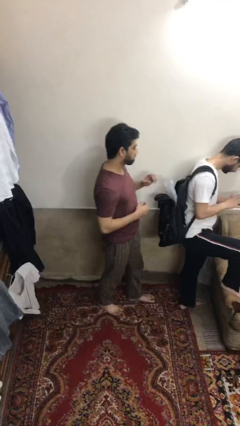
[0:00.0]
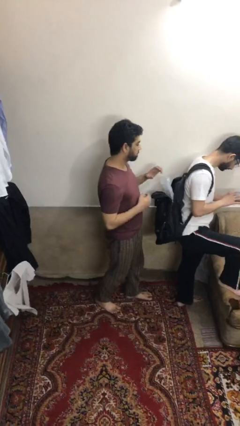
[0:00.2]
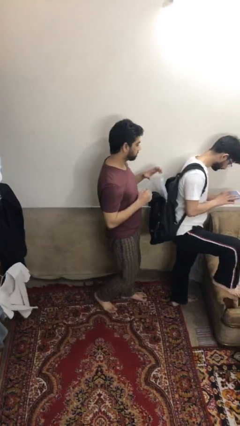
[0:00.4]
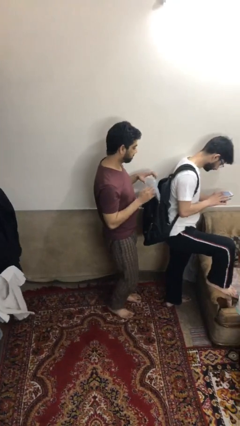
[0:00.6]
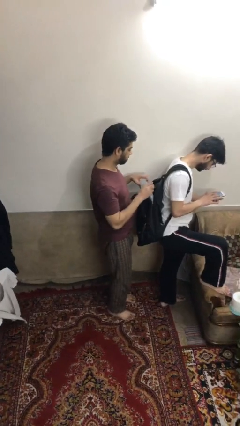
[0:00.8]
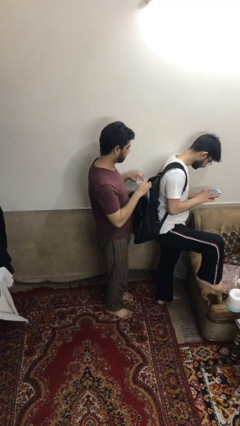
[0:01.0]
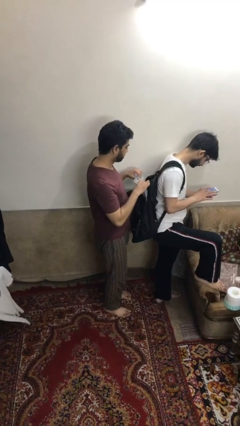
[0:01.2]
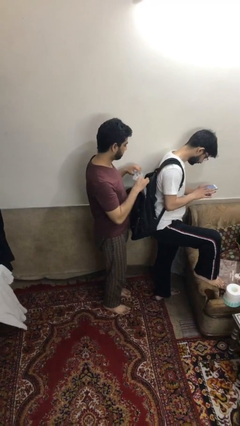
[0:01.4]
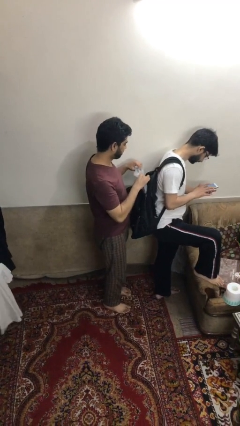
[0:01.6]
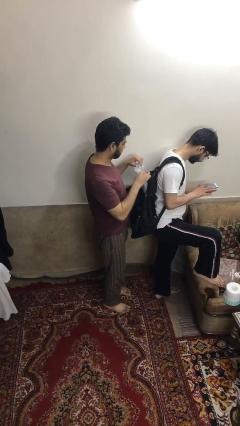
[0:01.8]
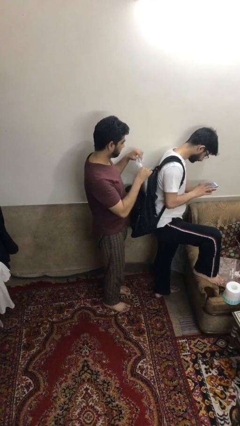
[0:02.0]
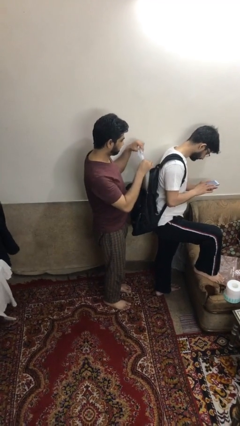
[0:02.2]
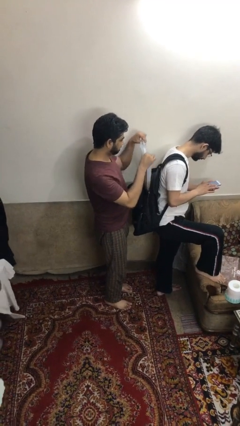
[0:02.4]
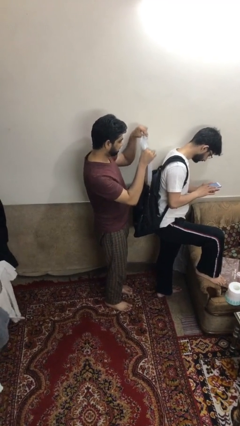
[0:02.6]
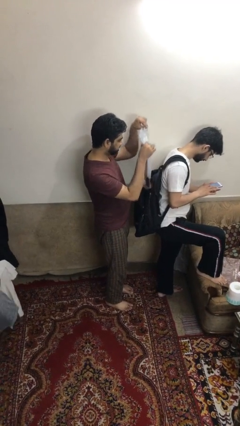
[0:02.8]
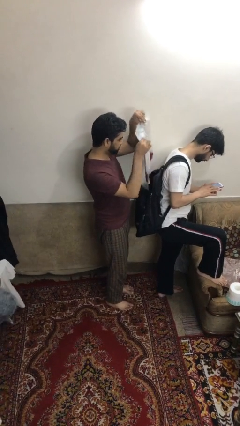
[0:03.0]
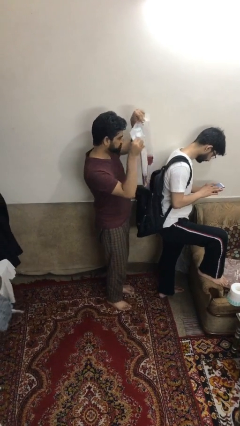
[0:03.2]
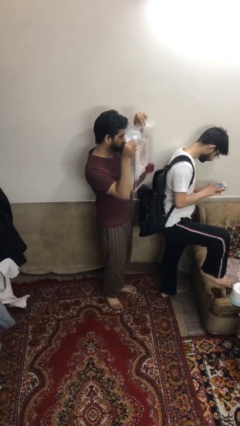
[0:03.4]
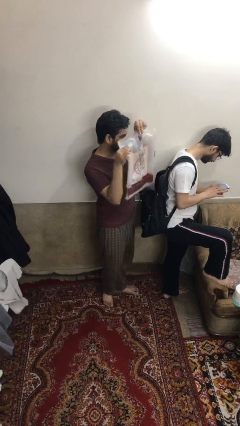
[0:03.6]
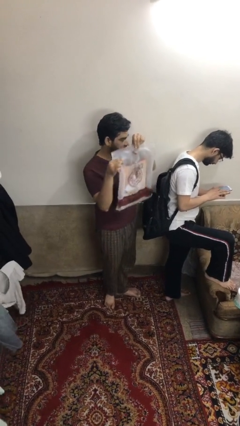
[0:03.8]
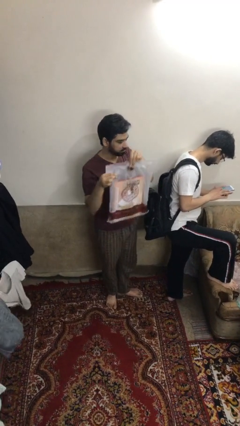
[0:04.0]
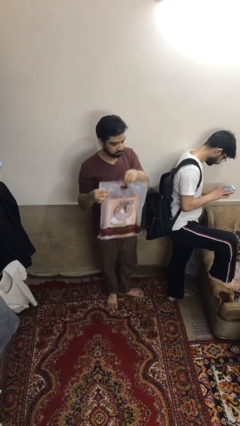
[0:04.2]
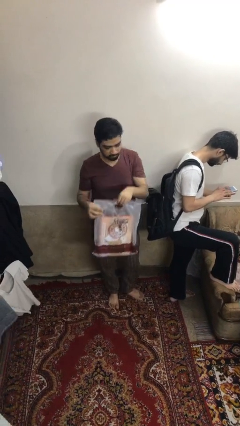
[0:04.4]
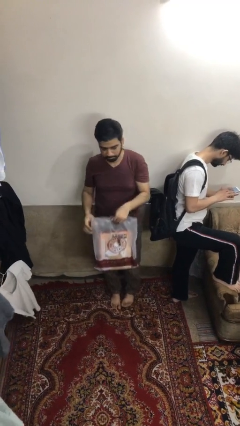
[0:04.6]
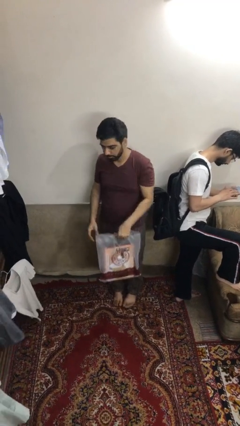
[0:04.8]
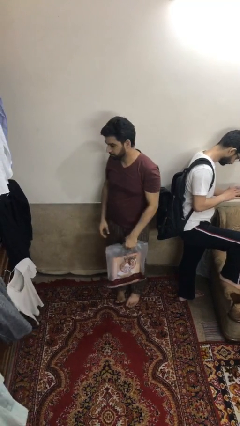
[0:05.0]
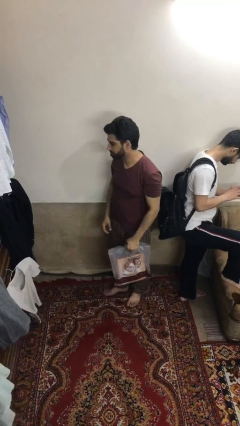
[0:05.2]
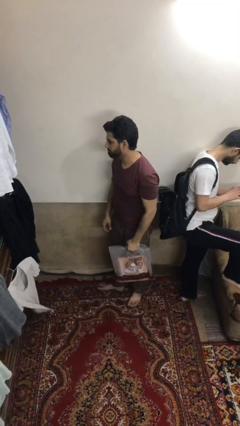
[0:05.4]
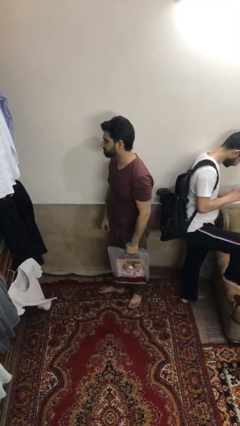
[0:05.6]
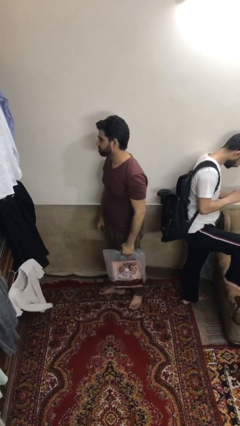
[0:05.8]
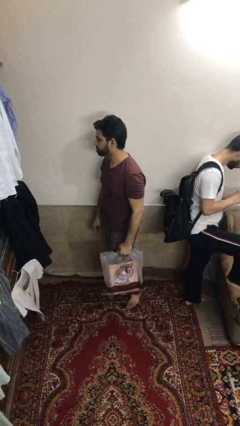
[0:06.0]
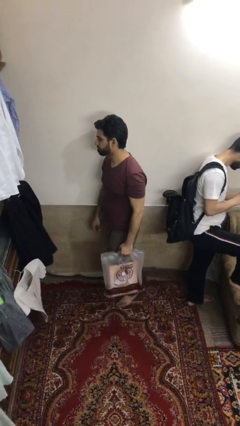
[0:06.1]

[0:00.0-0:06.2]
person steals object from person

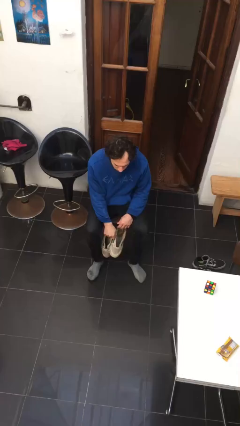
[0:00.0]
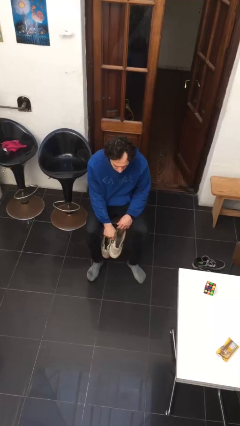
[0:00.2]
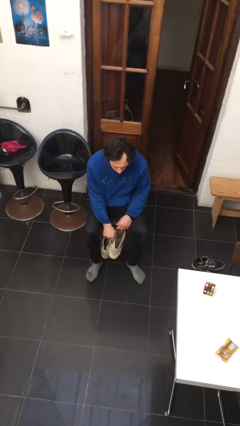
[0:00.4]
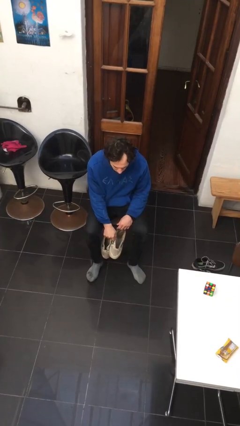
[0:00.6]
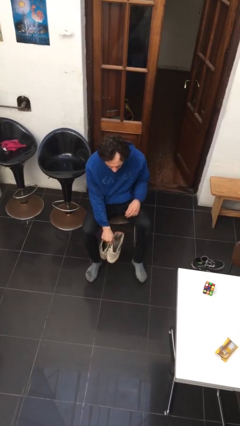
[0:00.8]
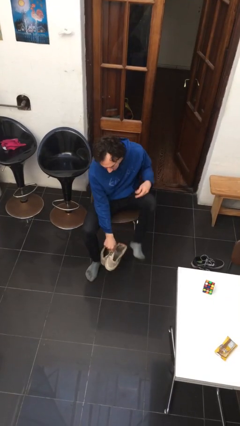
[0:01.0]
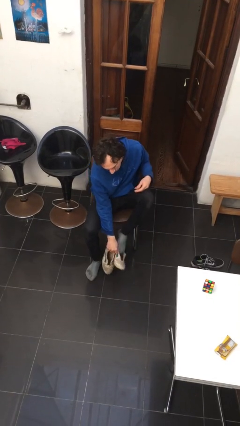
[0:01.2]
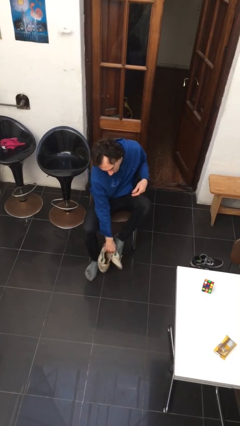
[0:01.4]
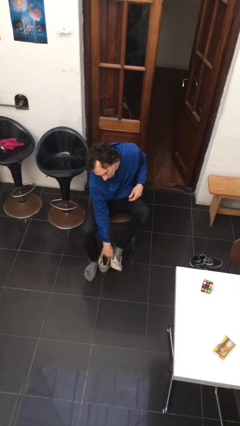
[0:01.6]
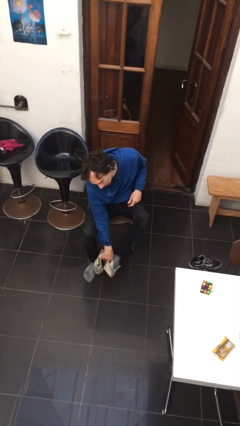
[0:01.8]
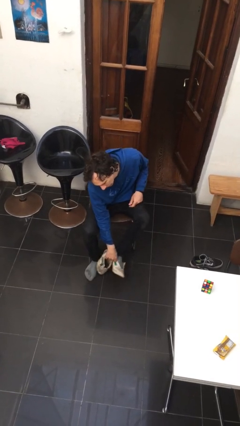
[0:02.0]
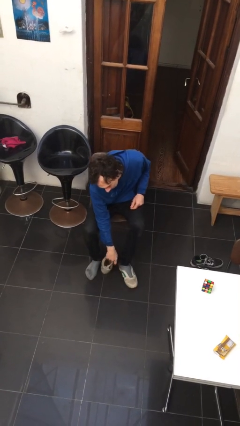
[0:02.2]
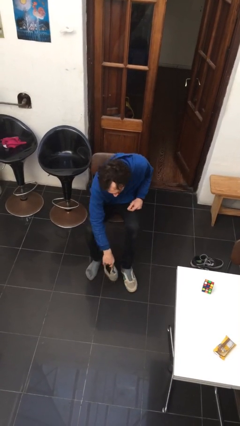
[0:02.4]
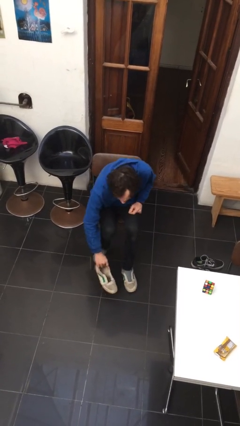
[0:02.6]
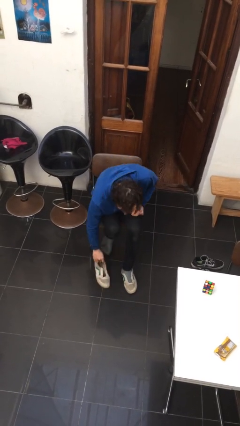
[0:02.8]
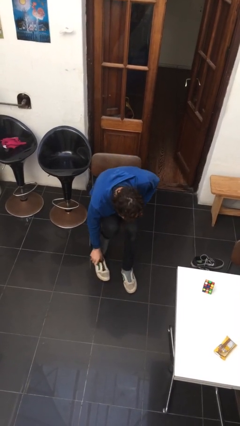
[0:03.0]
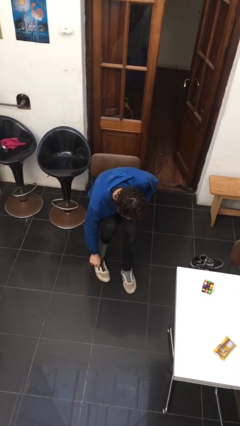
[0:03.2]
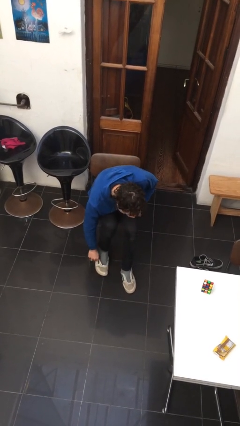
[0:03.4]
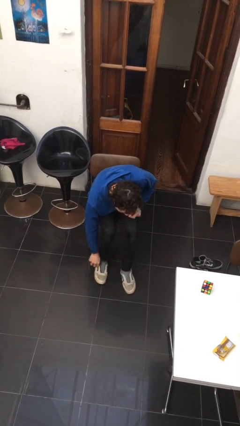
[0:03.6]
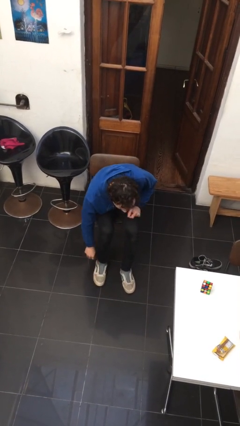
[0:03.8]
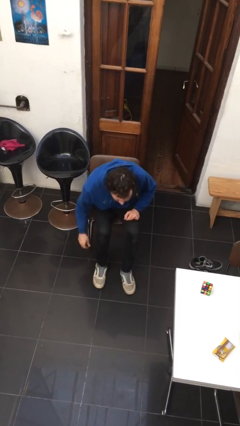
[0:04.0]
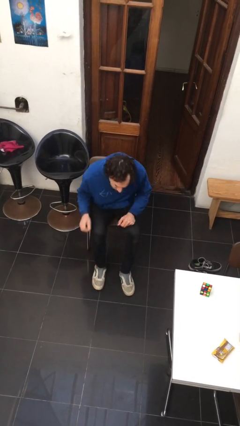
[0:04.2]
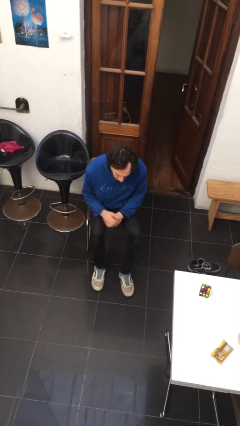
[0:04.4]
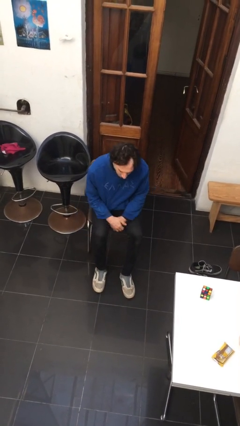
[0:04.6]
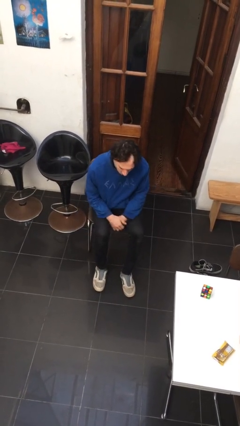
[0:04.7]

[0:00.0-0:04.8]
person puts on shoes

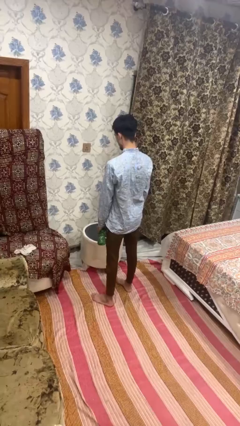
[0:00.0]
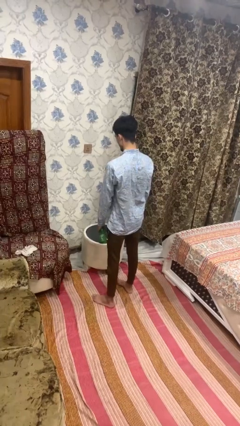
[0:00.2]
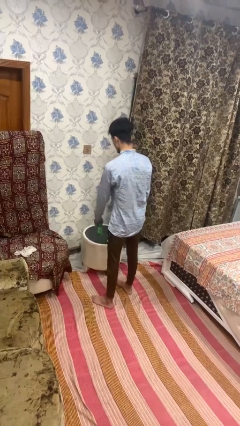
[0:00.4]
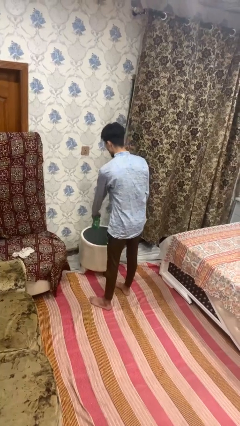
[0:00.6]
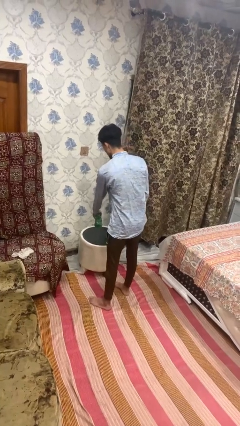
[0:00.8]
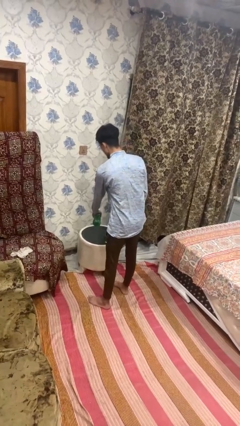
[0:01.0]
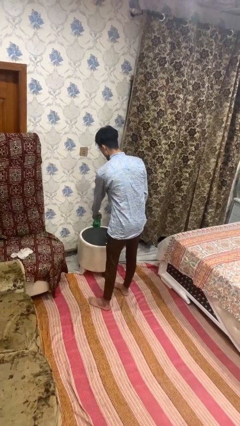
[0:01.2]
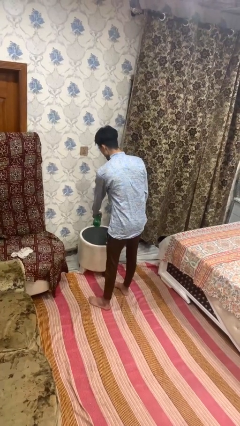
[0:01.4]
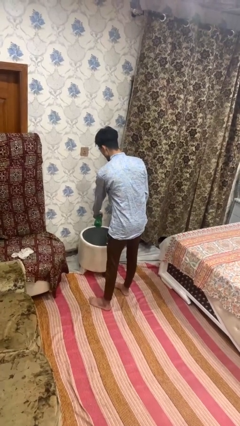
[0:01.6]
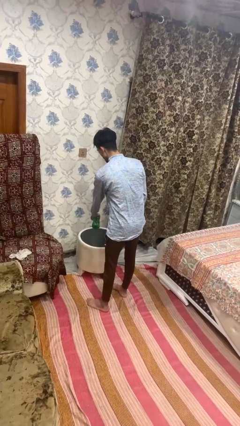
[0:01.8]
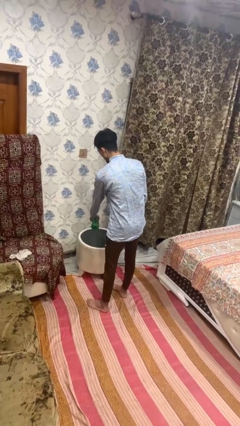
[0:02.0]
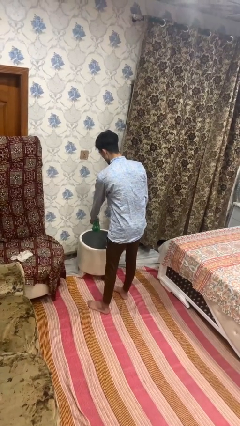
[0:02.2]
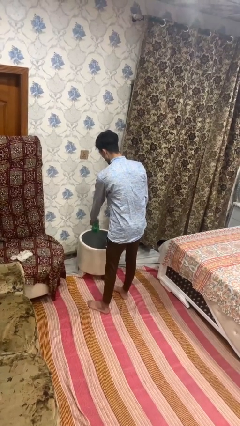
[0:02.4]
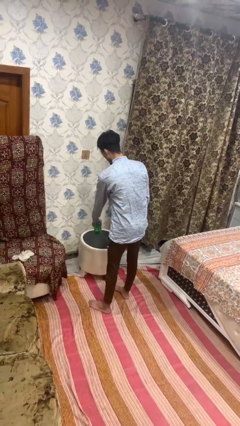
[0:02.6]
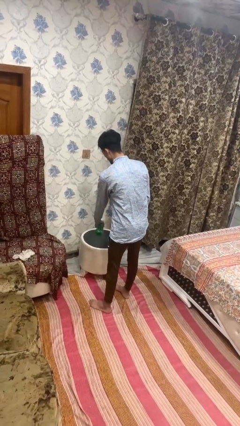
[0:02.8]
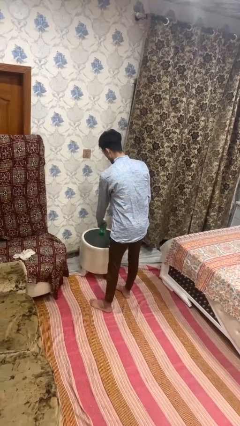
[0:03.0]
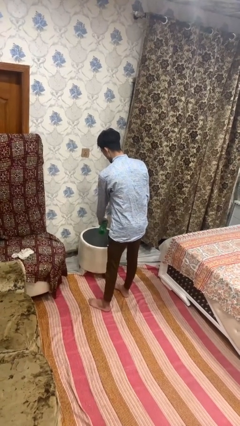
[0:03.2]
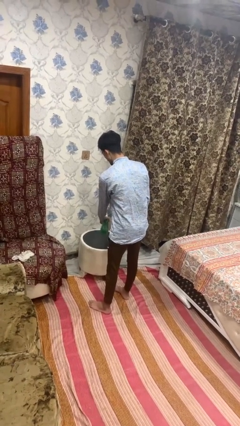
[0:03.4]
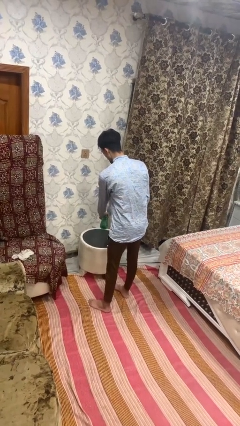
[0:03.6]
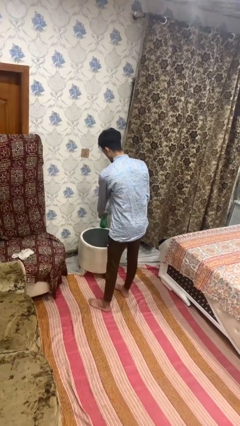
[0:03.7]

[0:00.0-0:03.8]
person sprays from bottle

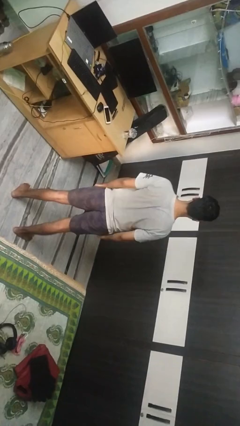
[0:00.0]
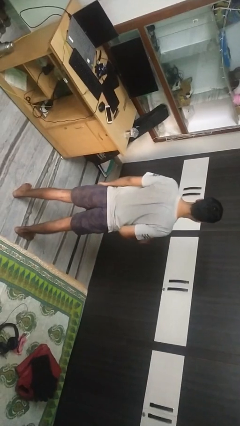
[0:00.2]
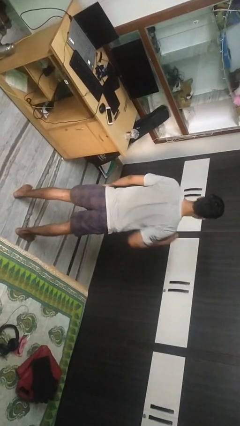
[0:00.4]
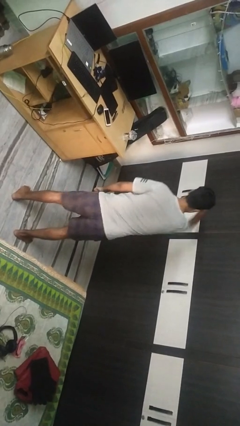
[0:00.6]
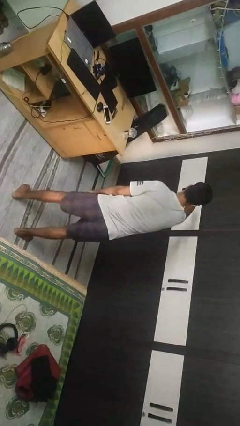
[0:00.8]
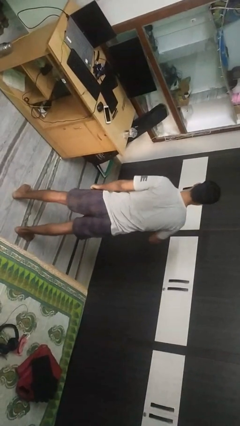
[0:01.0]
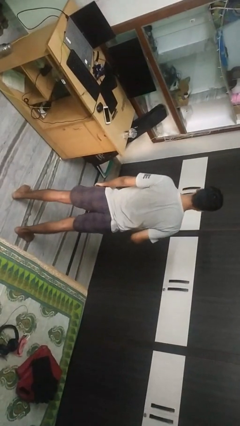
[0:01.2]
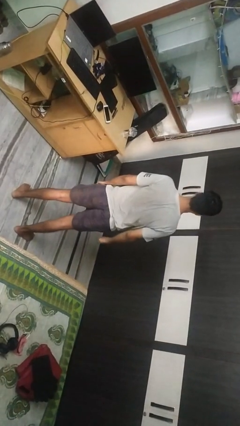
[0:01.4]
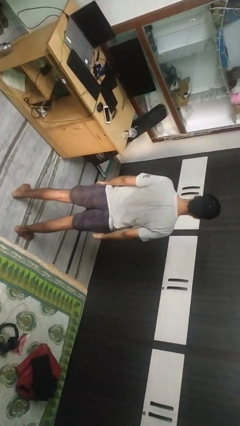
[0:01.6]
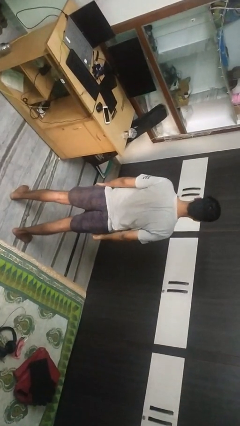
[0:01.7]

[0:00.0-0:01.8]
person punches

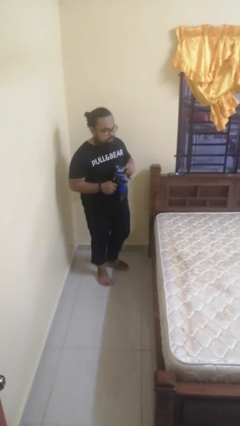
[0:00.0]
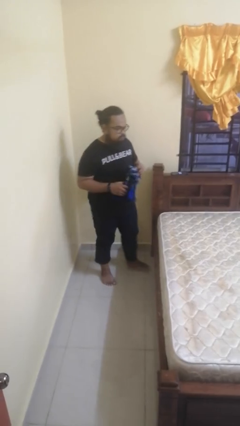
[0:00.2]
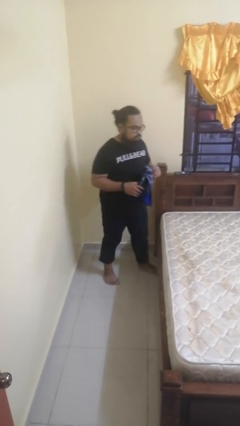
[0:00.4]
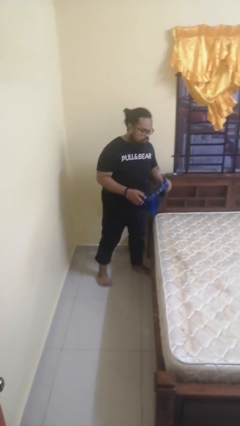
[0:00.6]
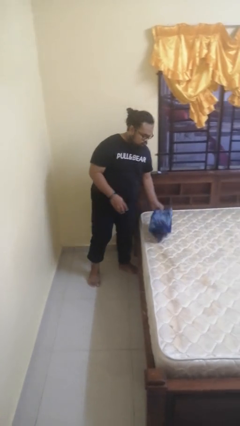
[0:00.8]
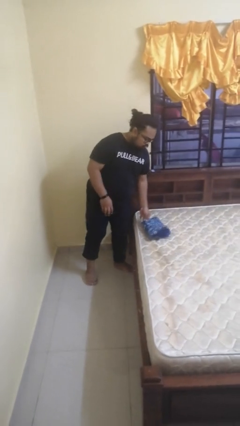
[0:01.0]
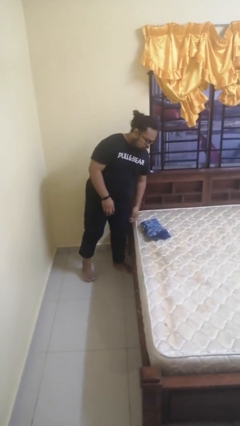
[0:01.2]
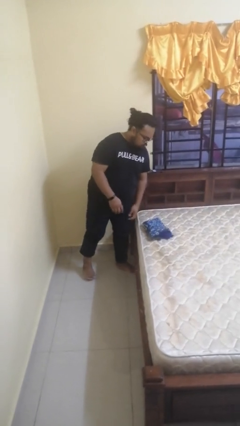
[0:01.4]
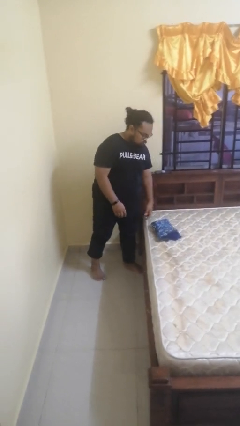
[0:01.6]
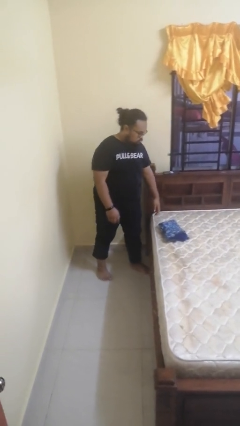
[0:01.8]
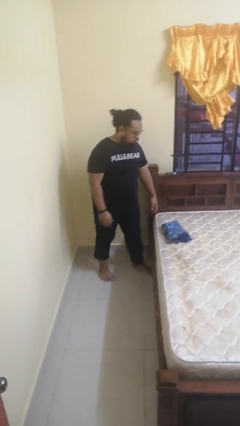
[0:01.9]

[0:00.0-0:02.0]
person puts down object on bed
